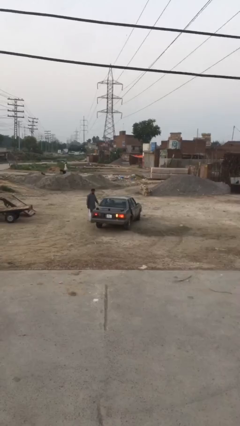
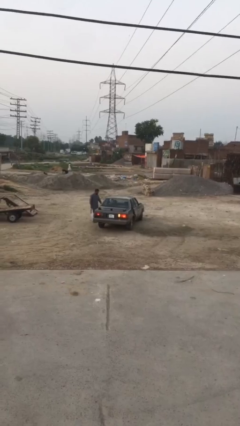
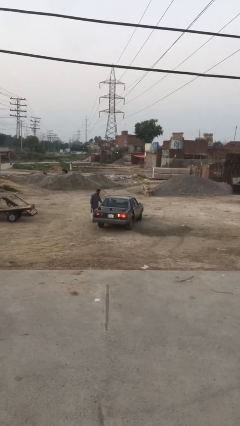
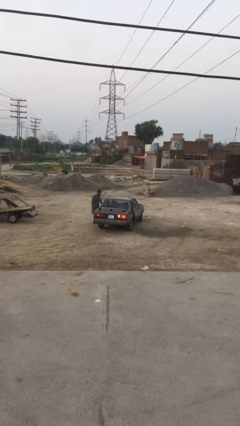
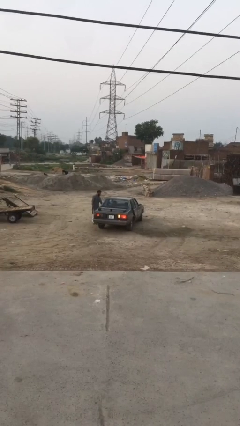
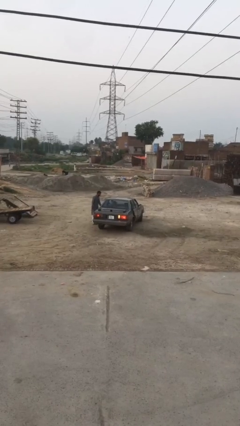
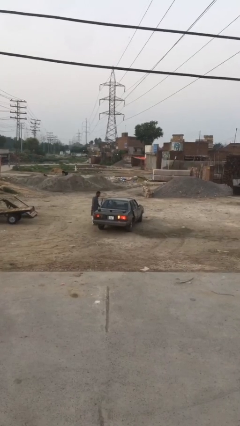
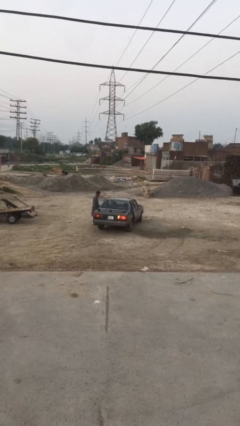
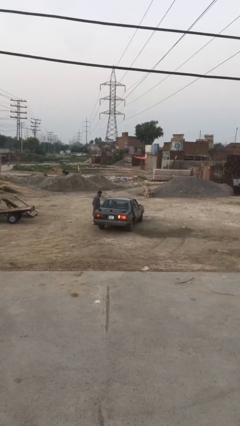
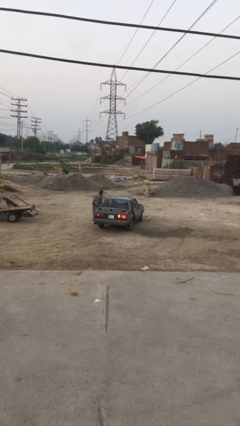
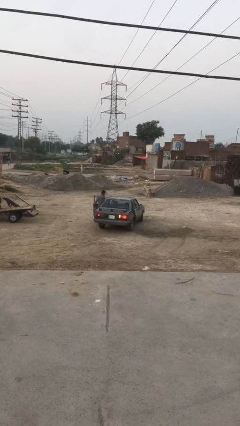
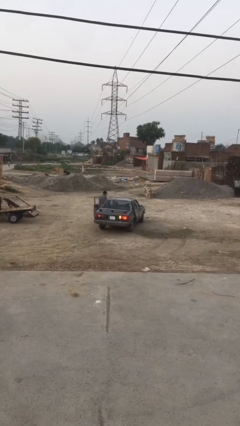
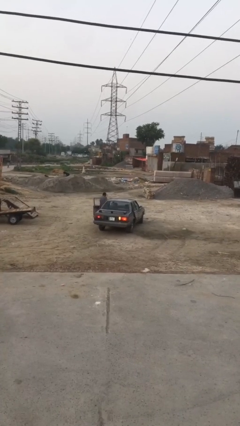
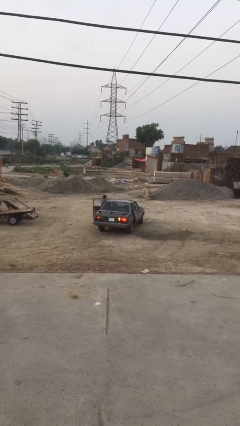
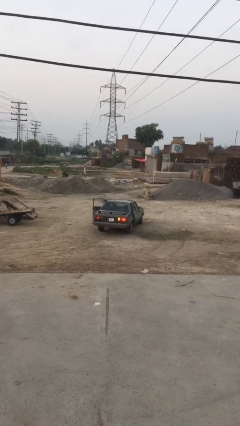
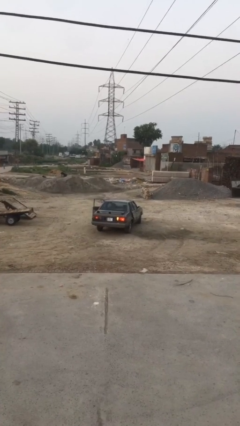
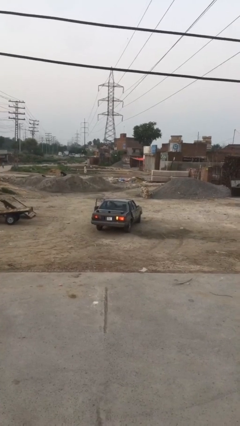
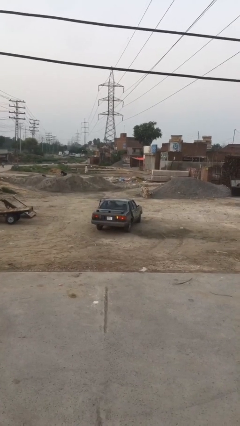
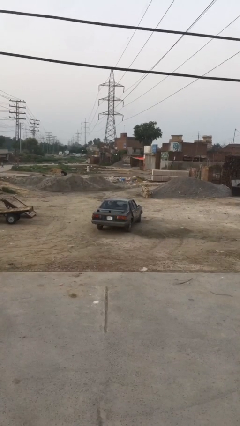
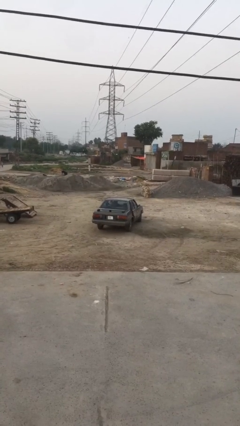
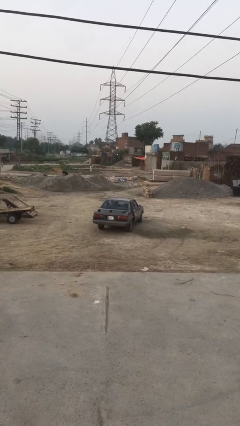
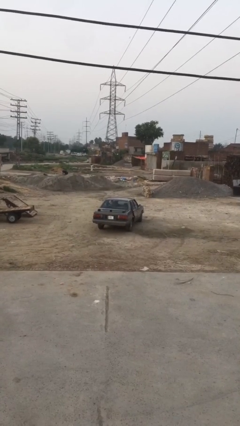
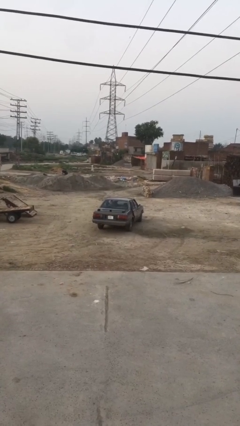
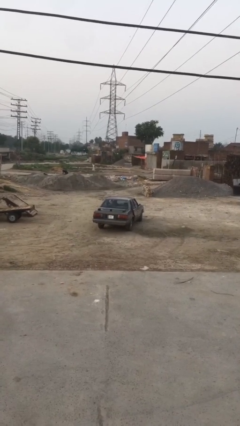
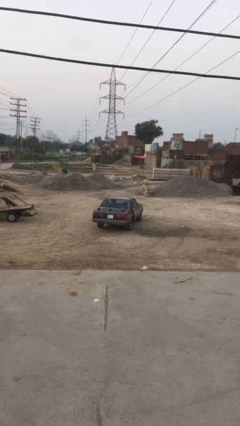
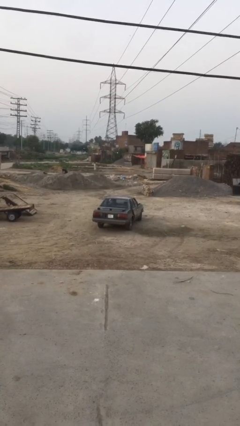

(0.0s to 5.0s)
car picks up person

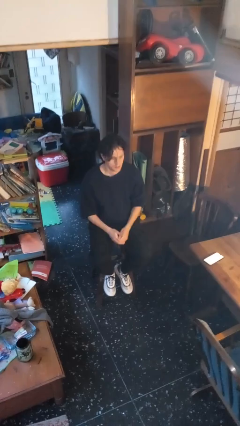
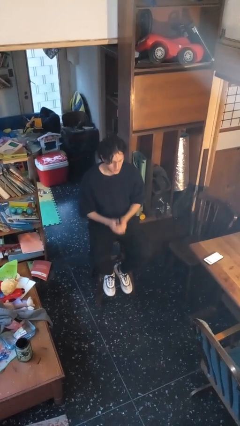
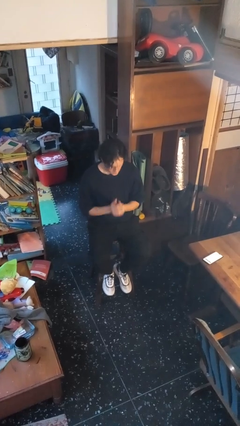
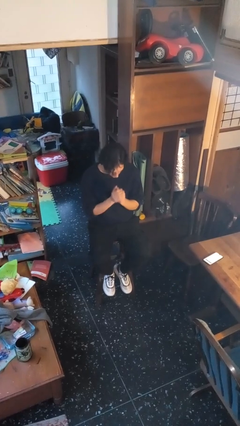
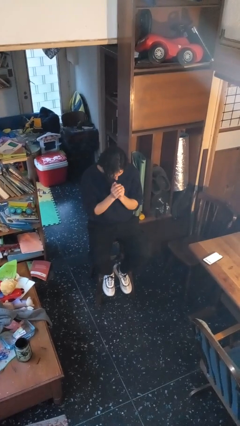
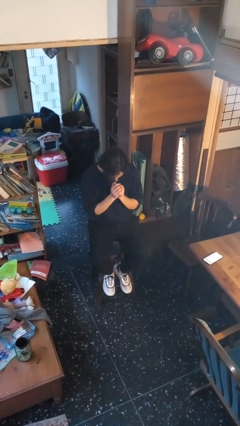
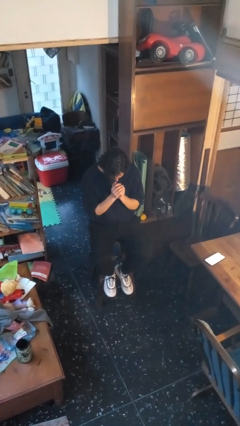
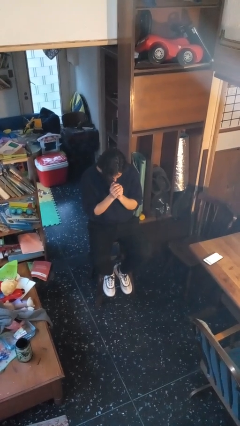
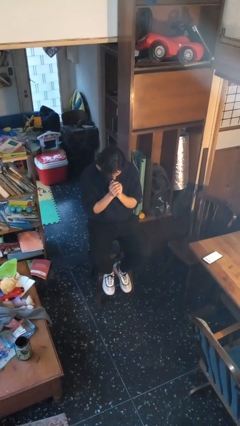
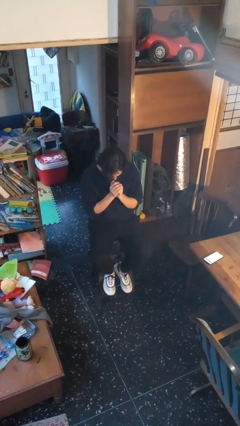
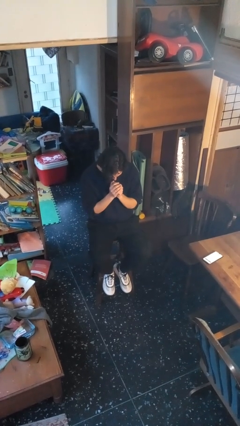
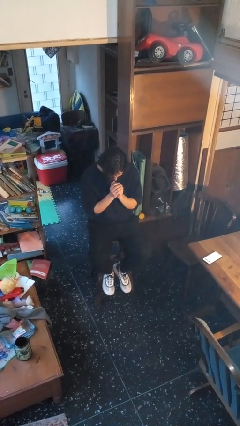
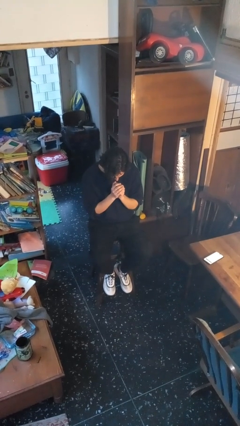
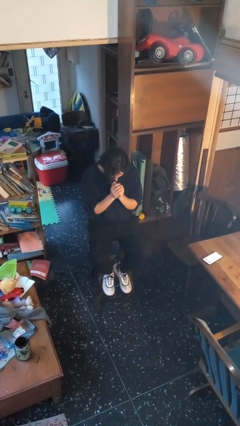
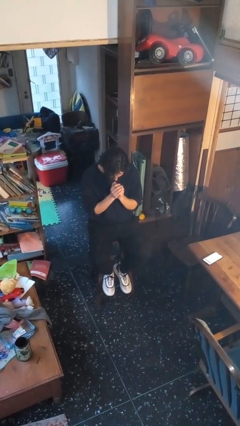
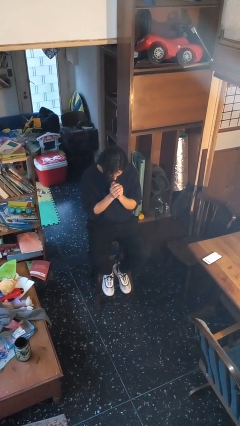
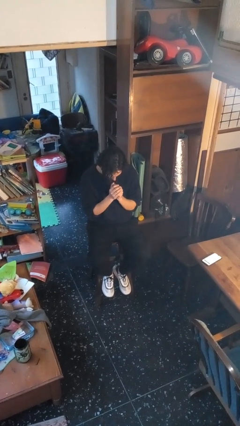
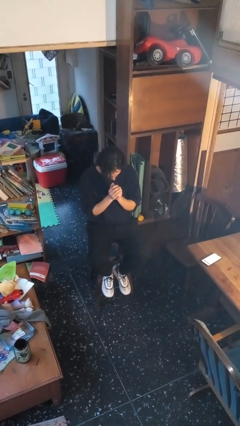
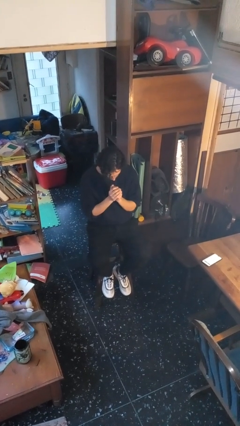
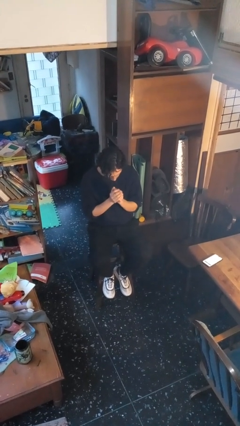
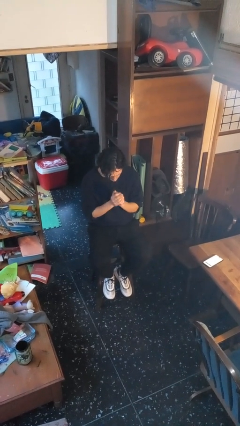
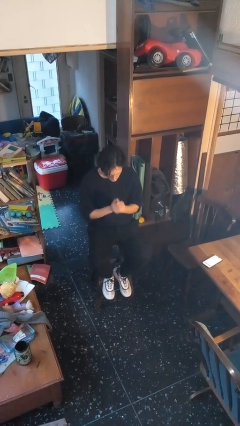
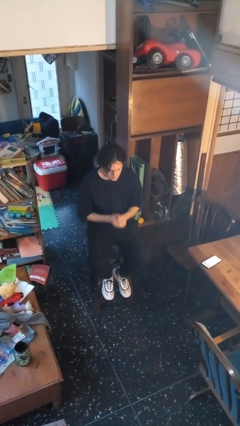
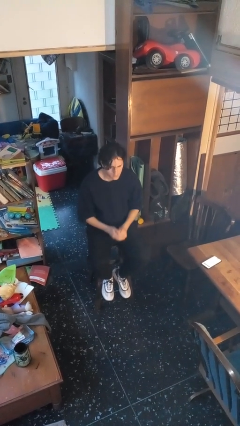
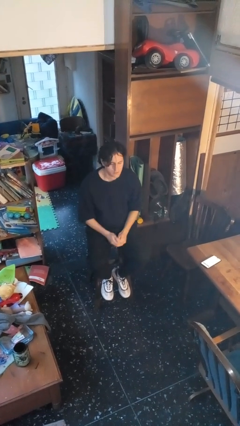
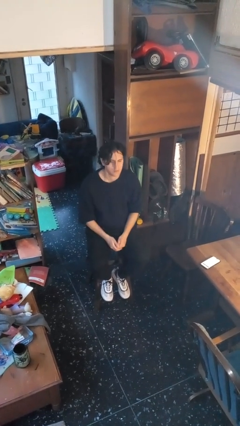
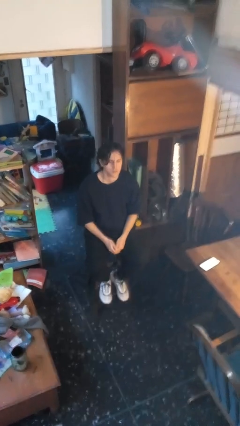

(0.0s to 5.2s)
person prays

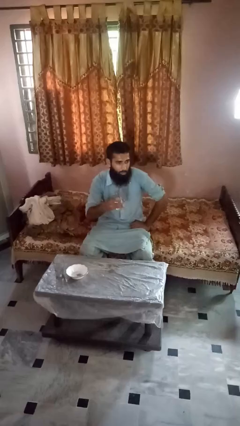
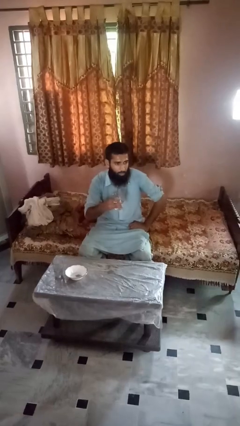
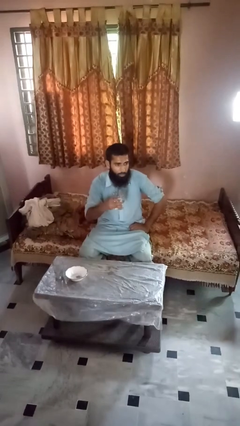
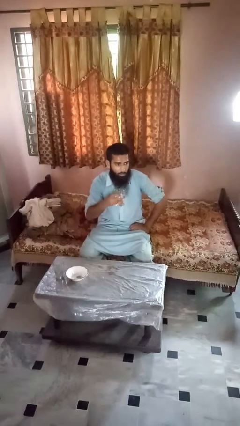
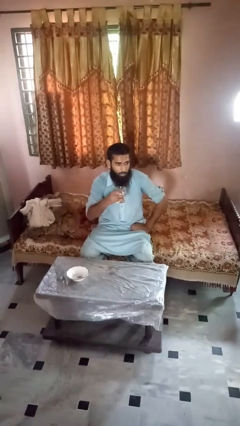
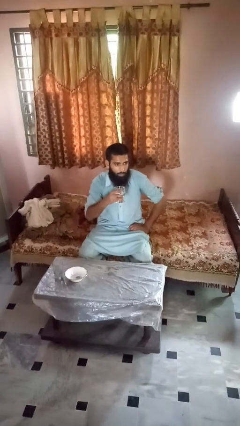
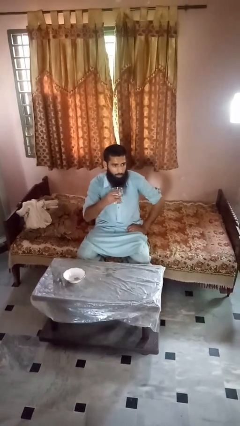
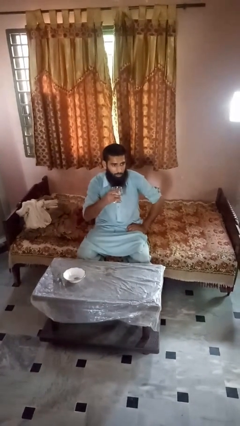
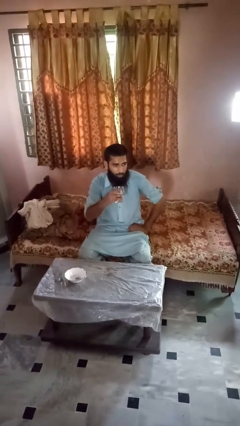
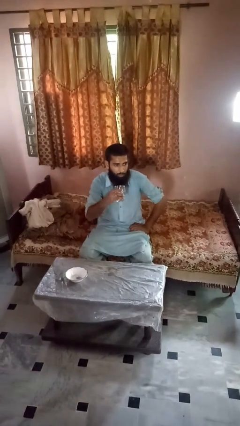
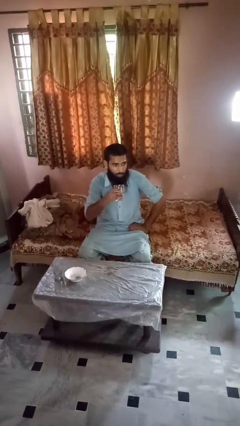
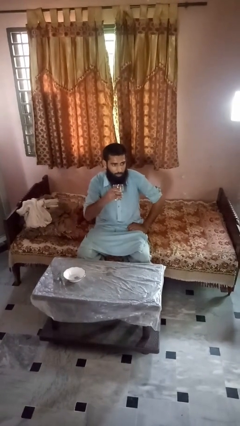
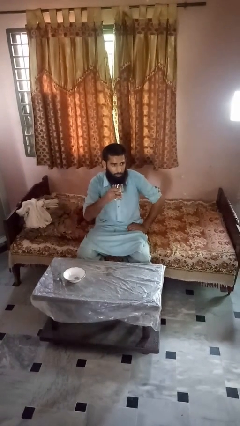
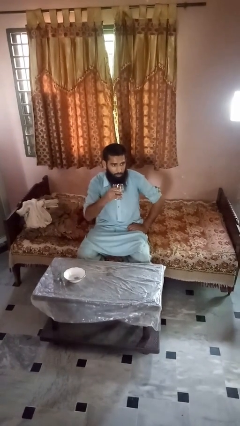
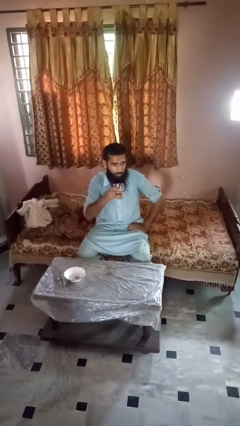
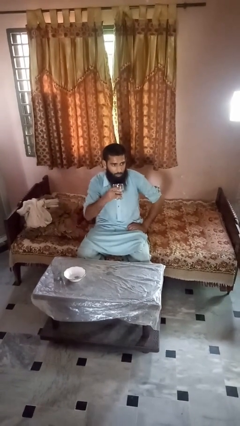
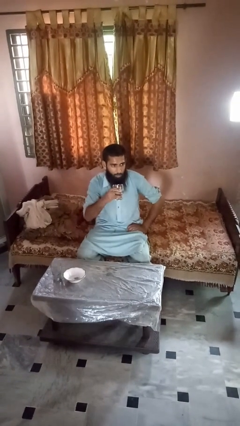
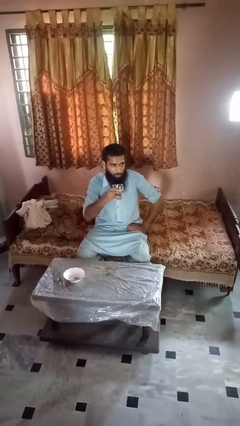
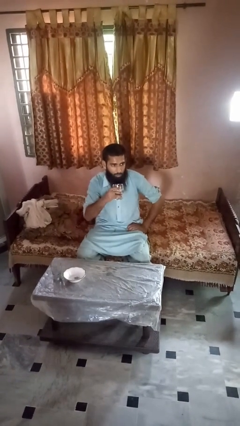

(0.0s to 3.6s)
person picks up object from table

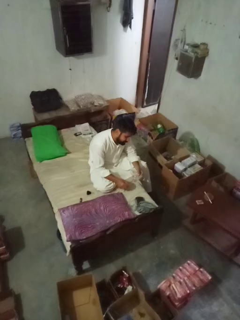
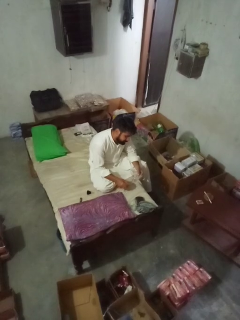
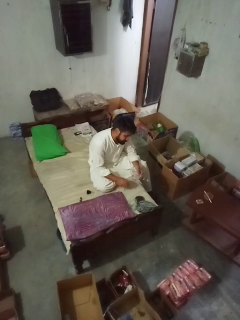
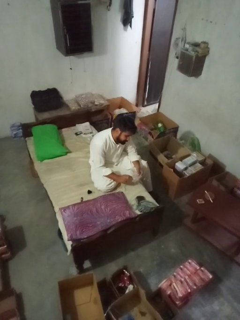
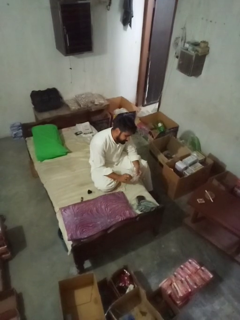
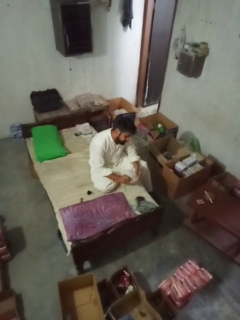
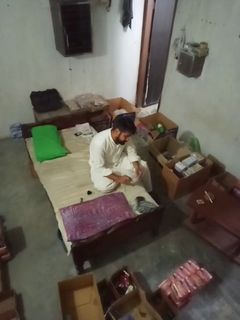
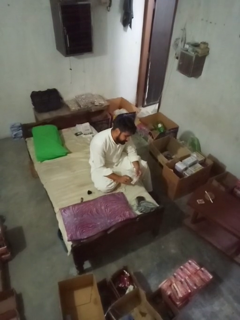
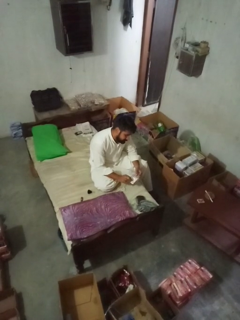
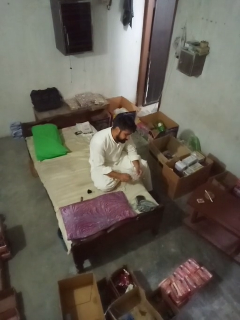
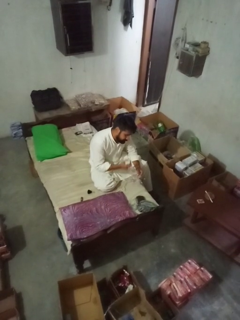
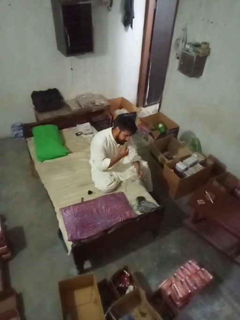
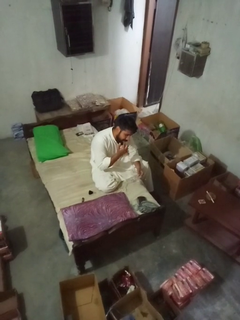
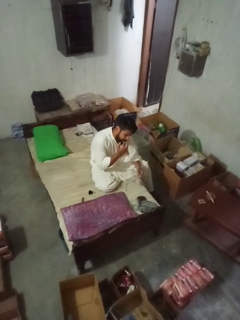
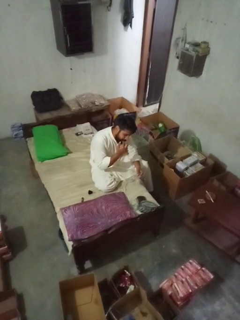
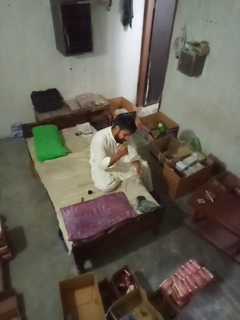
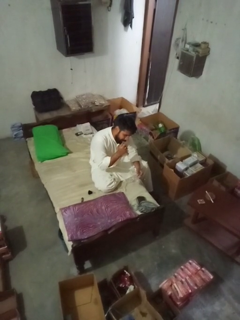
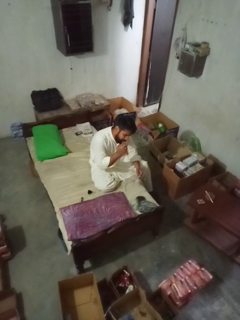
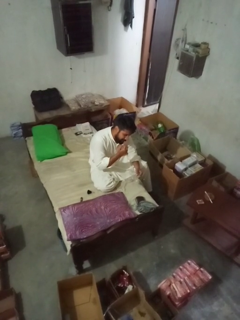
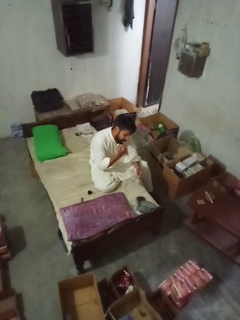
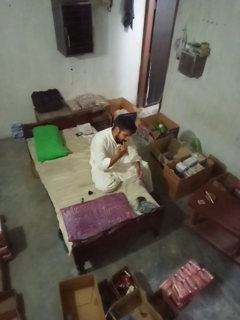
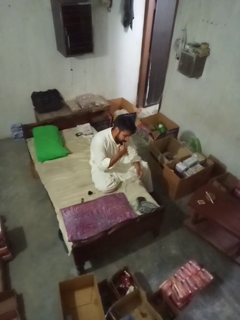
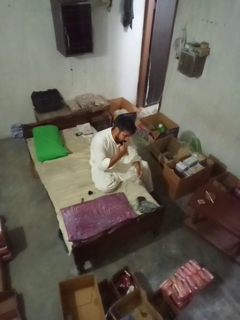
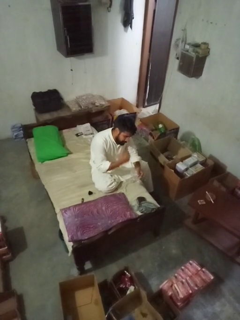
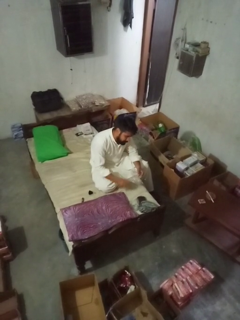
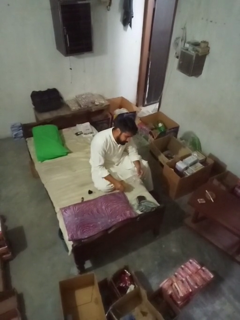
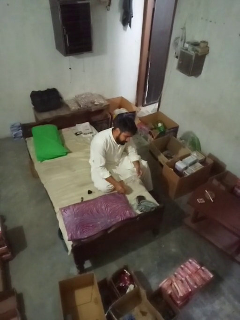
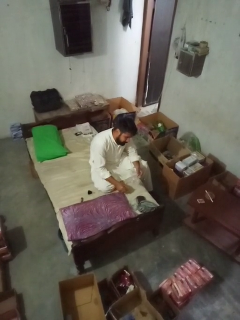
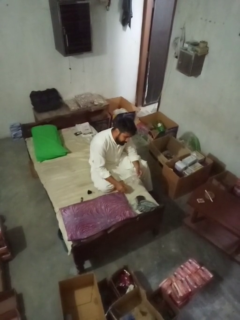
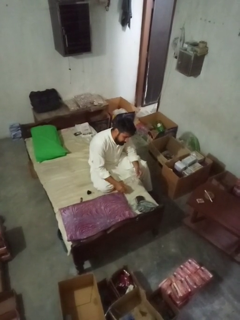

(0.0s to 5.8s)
person licks fingers
